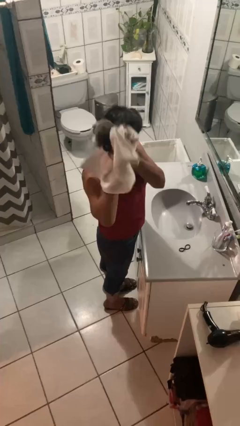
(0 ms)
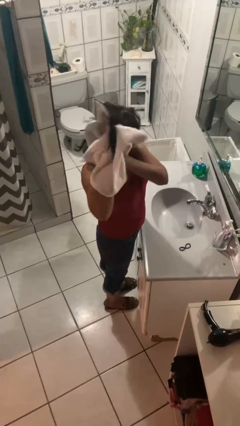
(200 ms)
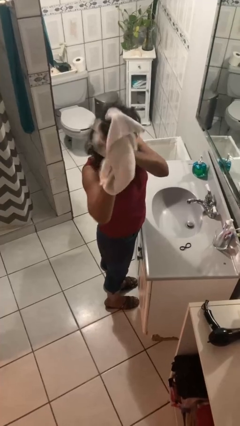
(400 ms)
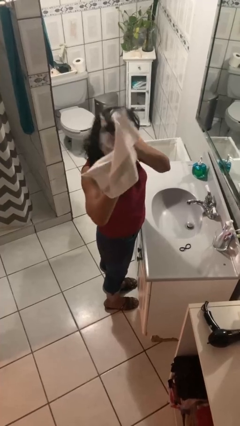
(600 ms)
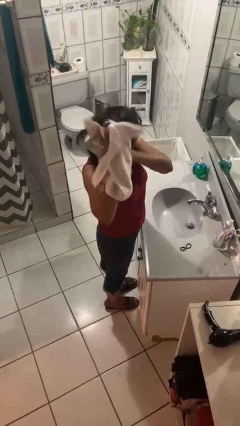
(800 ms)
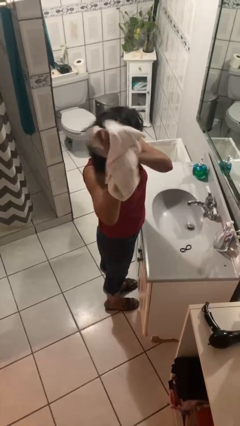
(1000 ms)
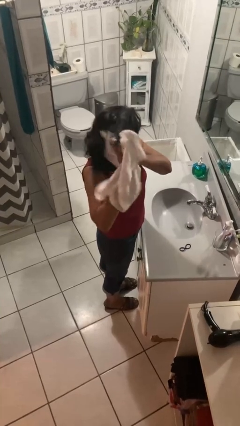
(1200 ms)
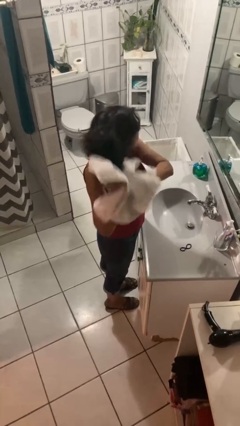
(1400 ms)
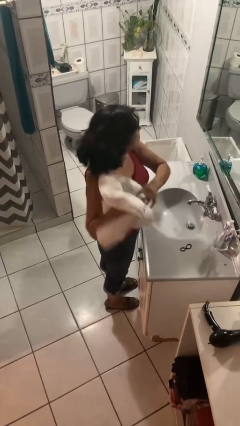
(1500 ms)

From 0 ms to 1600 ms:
person dries hair with towel

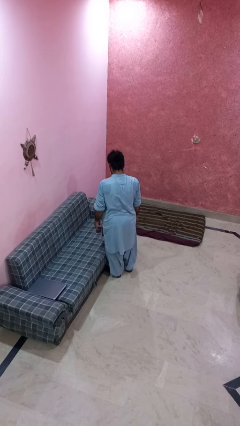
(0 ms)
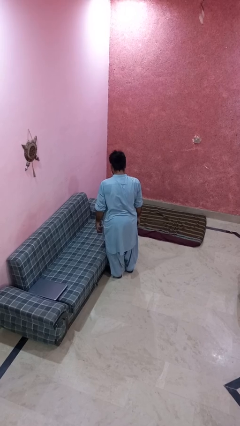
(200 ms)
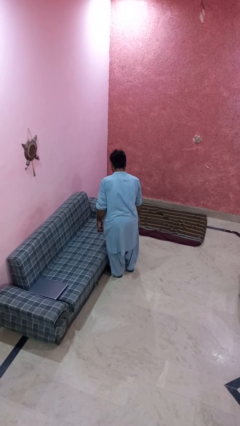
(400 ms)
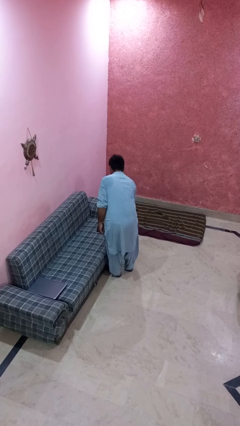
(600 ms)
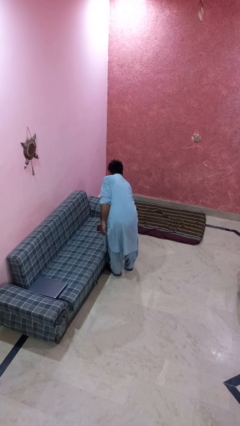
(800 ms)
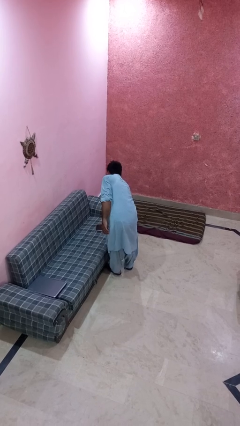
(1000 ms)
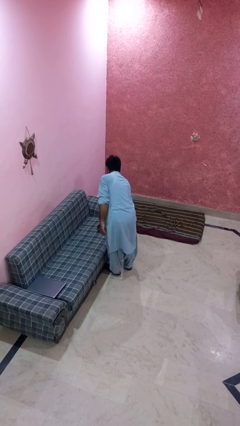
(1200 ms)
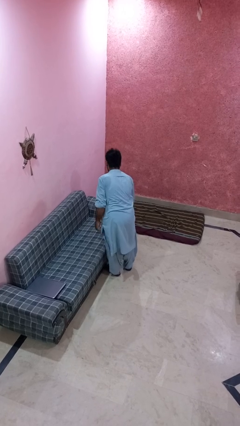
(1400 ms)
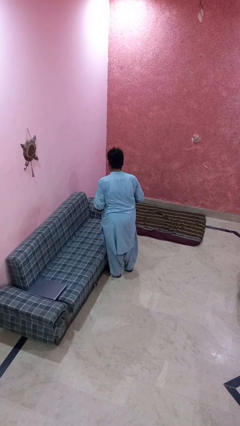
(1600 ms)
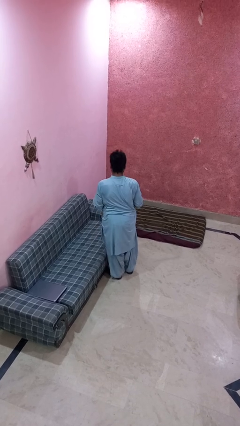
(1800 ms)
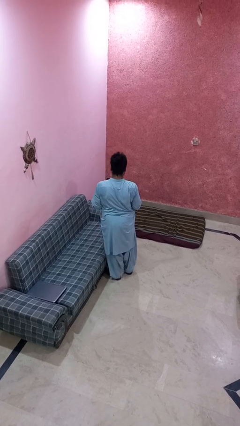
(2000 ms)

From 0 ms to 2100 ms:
person picks up object from couch

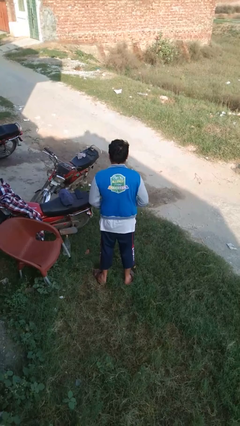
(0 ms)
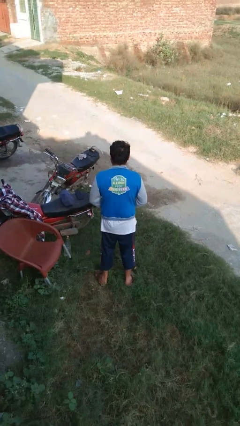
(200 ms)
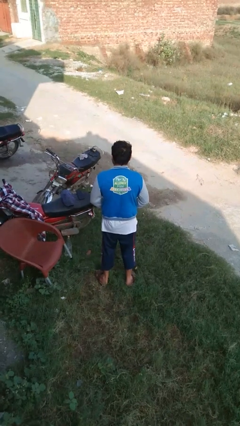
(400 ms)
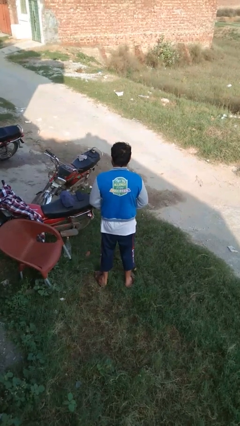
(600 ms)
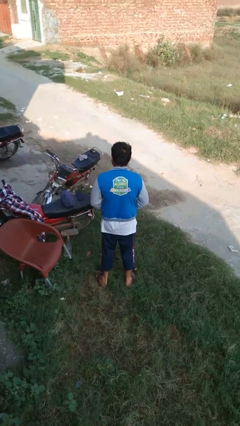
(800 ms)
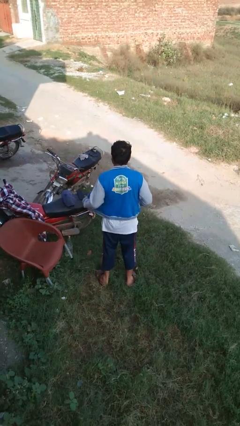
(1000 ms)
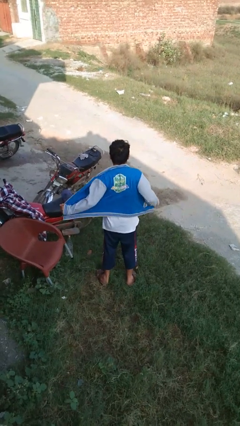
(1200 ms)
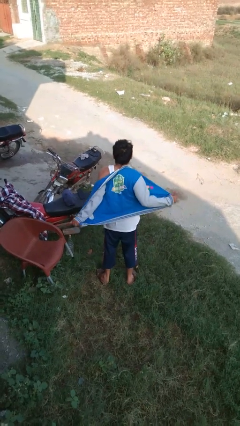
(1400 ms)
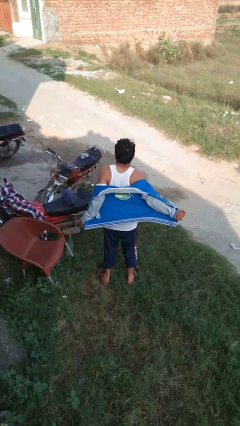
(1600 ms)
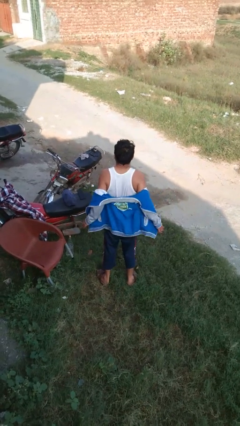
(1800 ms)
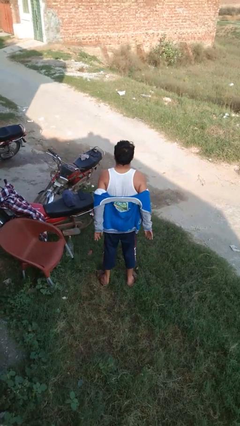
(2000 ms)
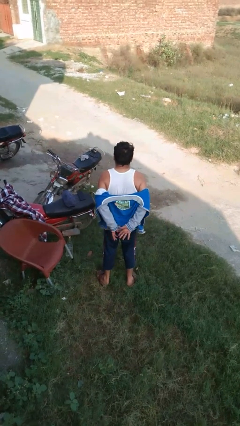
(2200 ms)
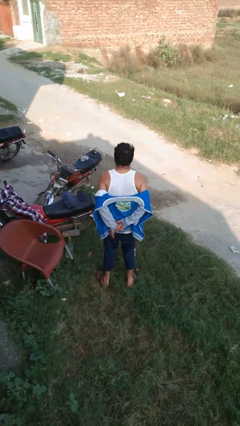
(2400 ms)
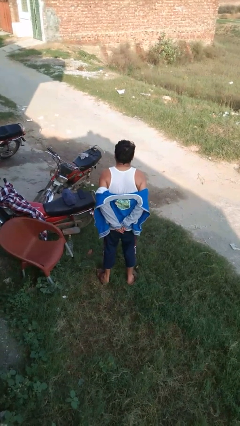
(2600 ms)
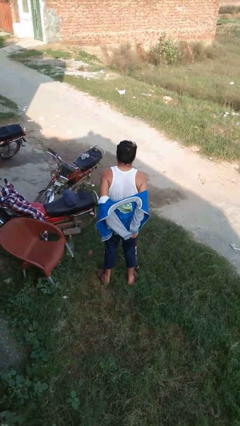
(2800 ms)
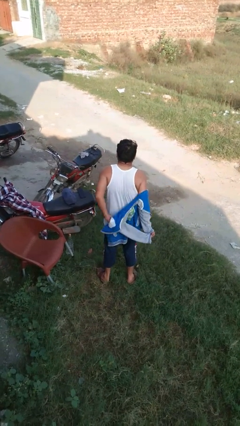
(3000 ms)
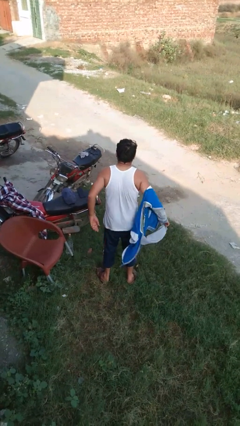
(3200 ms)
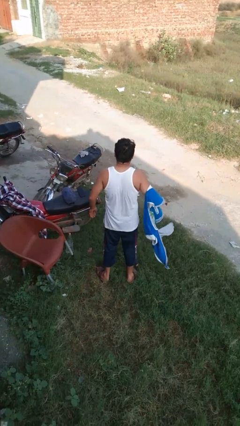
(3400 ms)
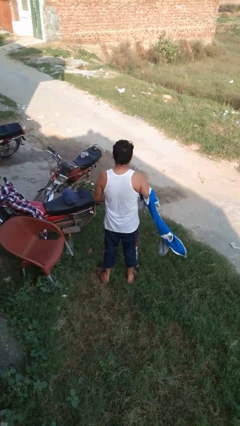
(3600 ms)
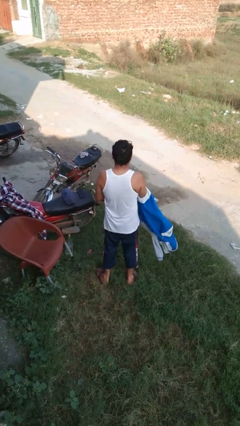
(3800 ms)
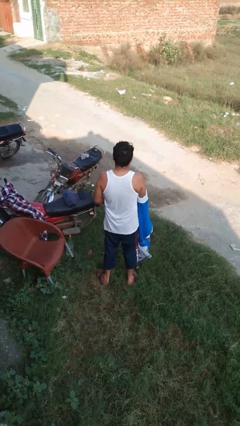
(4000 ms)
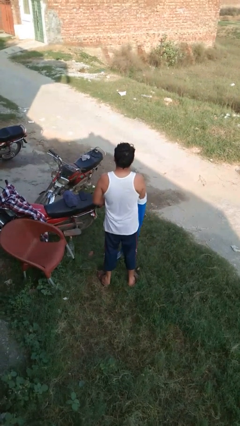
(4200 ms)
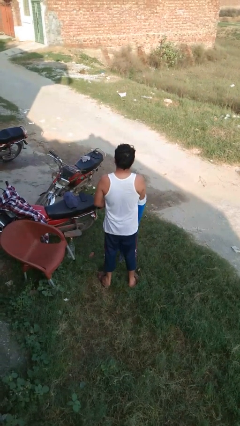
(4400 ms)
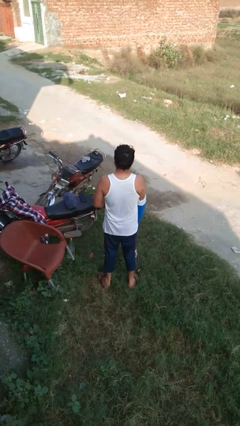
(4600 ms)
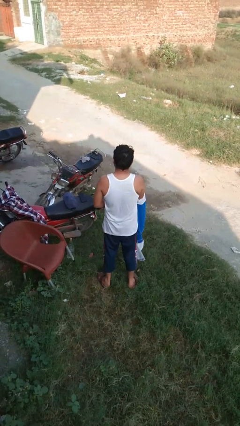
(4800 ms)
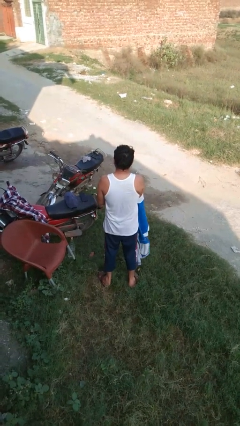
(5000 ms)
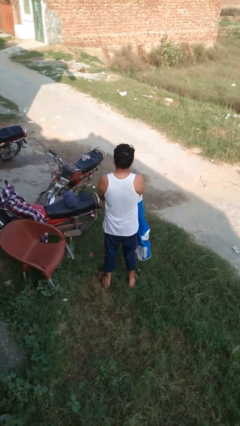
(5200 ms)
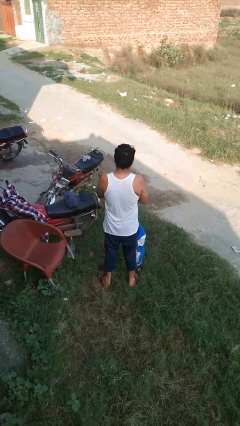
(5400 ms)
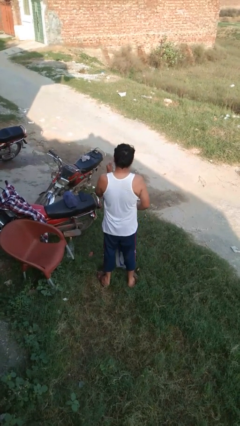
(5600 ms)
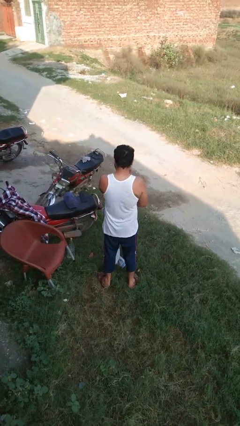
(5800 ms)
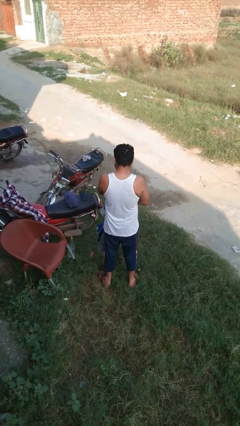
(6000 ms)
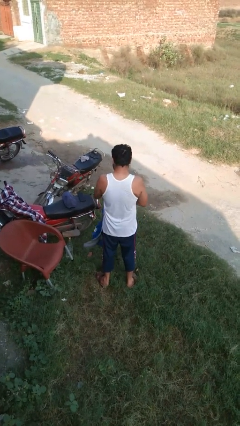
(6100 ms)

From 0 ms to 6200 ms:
person takes off jacket

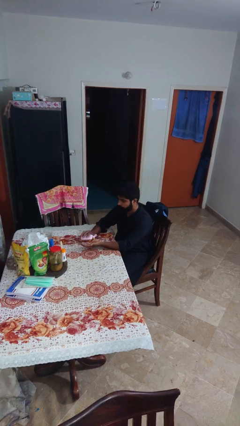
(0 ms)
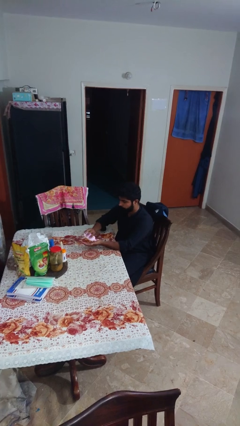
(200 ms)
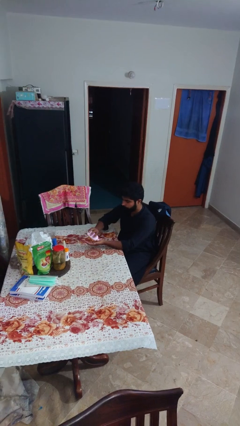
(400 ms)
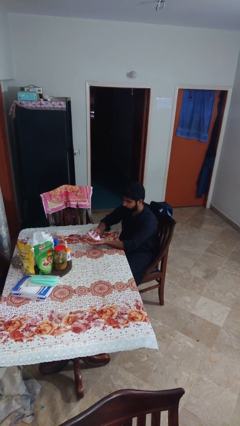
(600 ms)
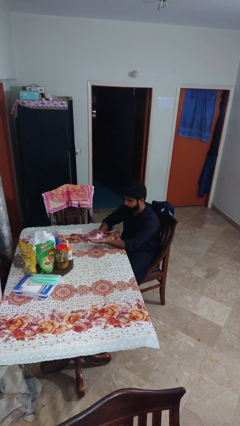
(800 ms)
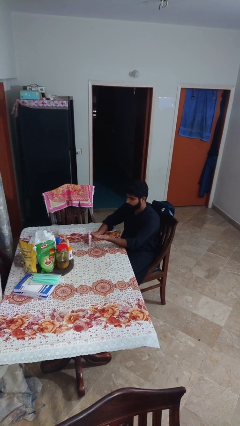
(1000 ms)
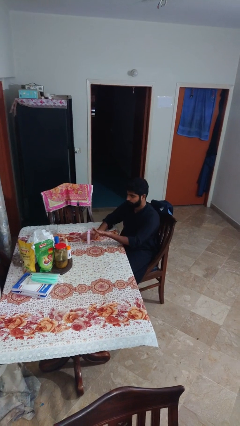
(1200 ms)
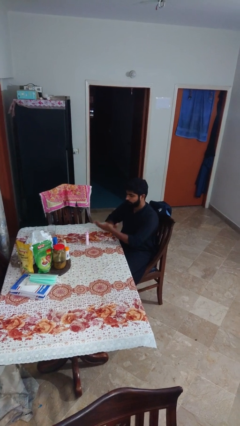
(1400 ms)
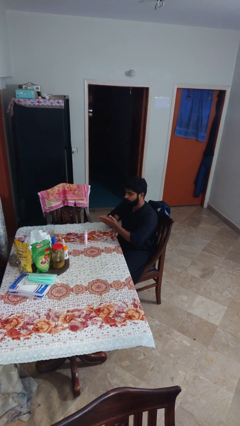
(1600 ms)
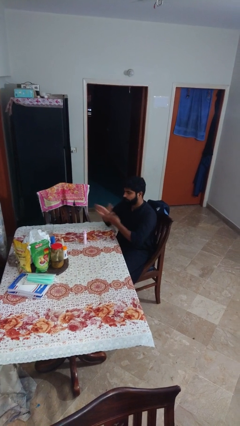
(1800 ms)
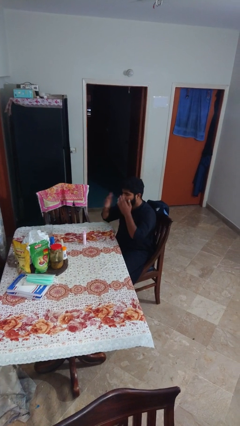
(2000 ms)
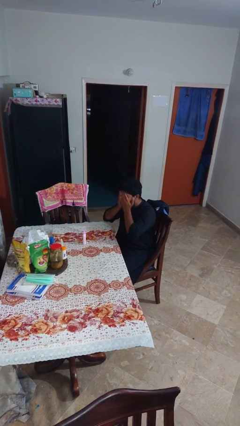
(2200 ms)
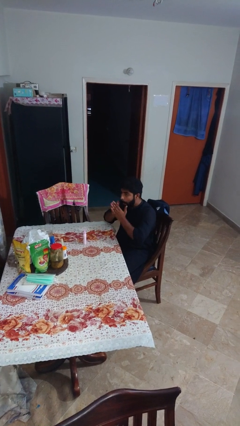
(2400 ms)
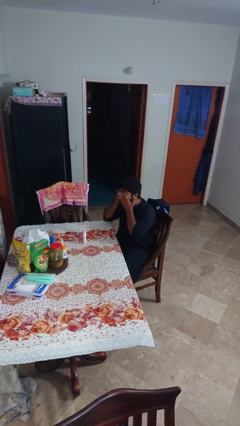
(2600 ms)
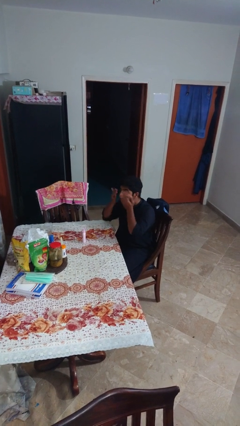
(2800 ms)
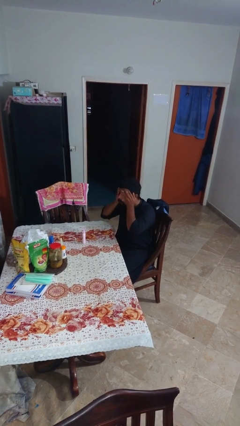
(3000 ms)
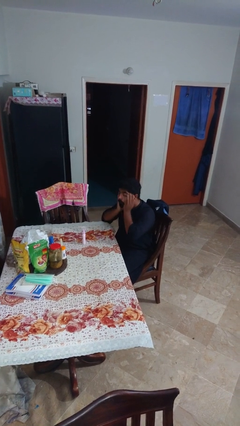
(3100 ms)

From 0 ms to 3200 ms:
person applies facial moisturizer

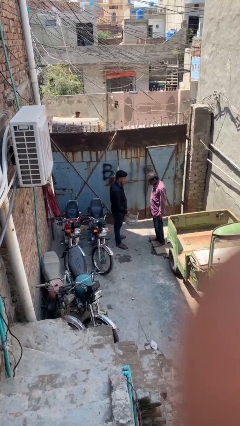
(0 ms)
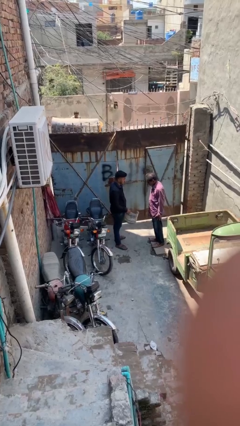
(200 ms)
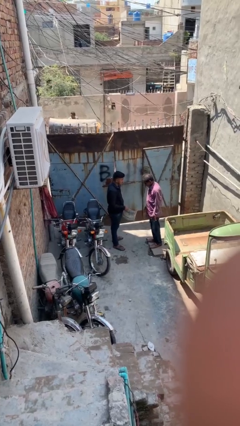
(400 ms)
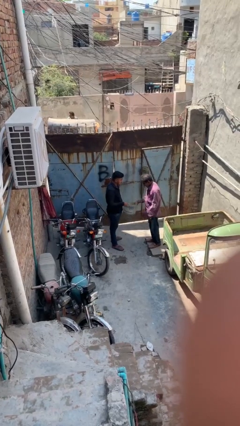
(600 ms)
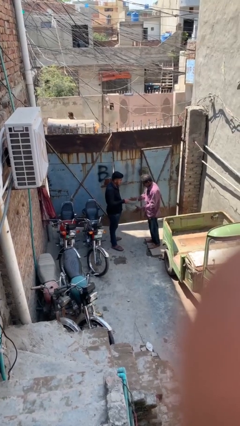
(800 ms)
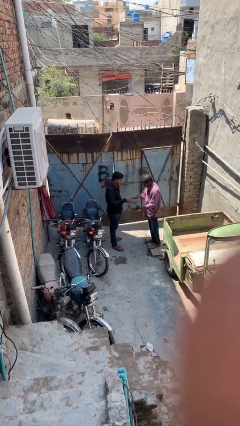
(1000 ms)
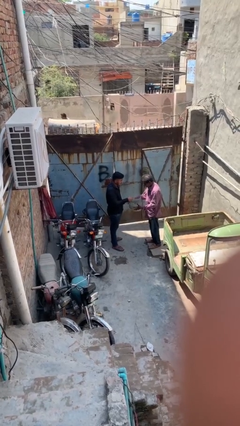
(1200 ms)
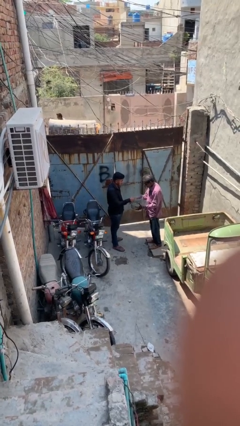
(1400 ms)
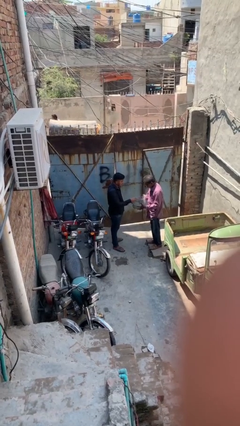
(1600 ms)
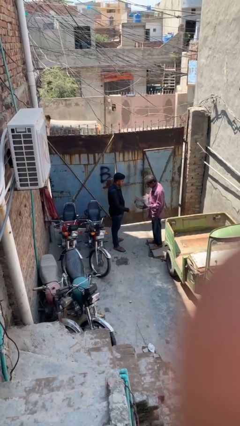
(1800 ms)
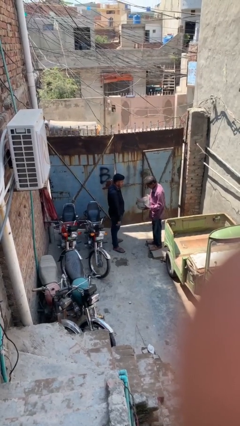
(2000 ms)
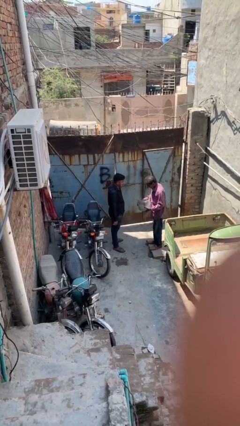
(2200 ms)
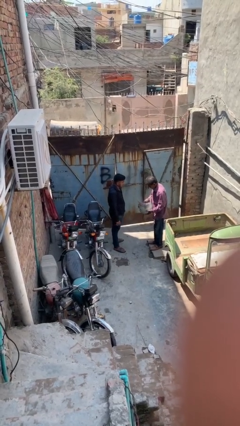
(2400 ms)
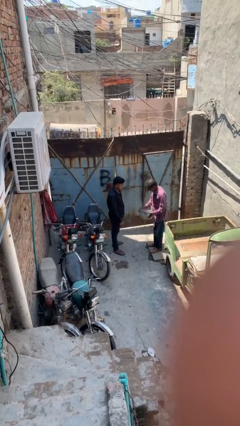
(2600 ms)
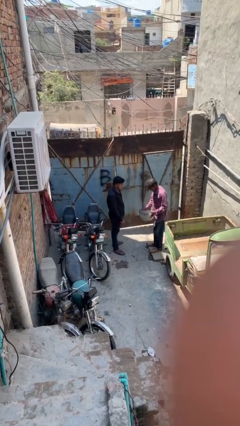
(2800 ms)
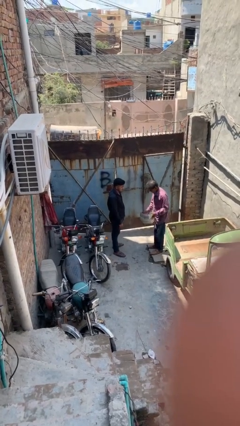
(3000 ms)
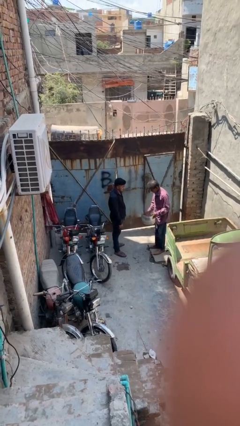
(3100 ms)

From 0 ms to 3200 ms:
person transfers object to person

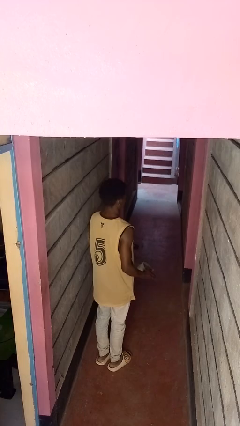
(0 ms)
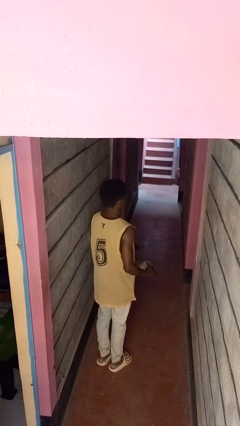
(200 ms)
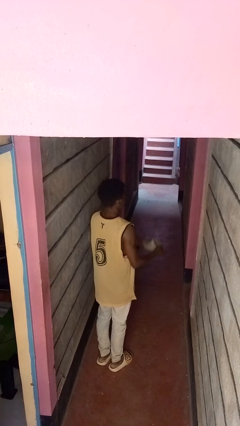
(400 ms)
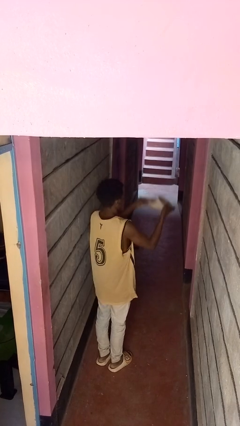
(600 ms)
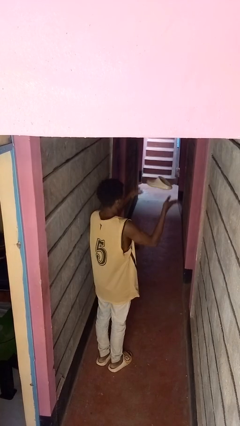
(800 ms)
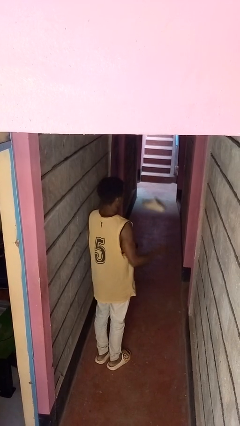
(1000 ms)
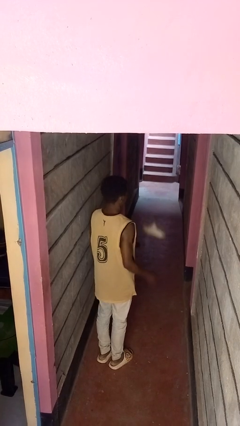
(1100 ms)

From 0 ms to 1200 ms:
person throws object into air
